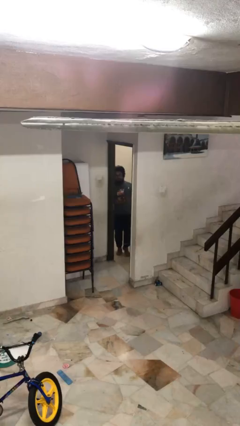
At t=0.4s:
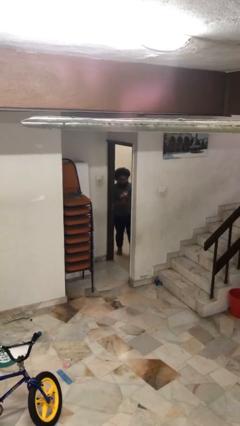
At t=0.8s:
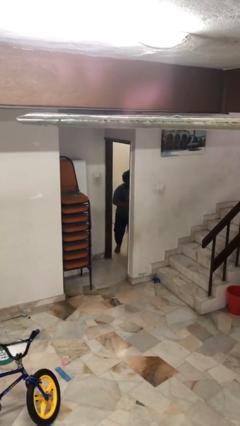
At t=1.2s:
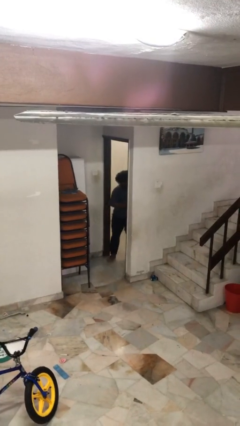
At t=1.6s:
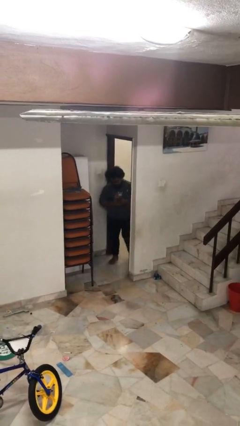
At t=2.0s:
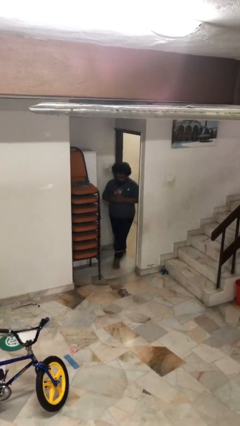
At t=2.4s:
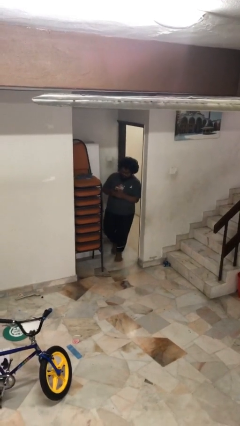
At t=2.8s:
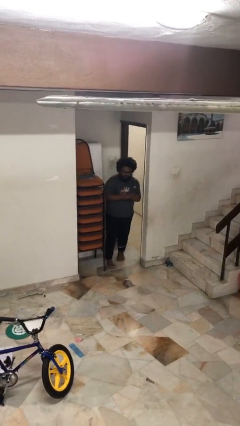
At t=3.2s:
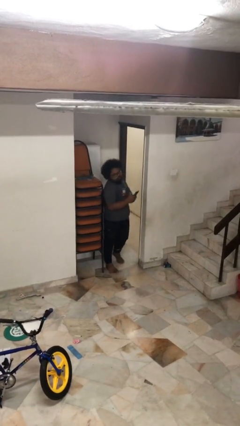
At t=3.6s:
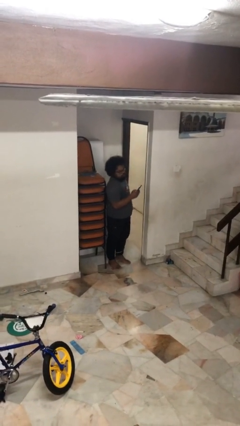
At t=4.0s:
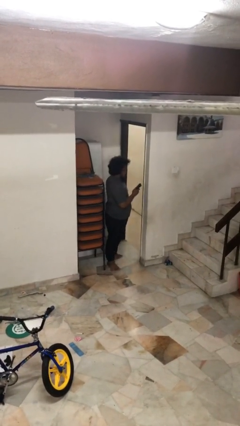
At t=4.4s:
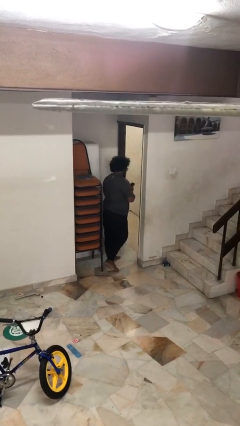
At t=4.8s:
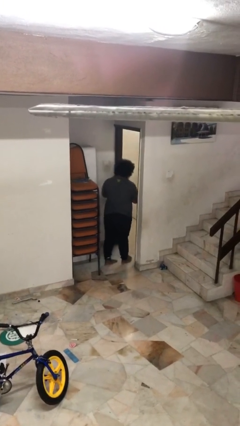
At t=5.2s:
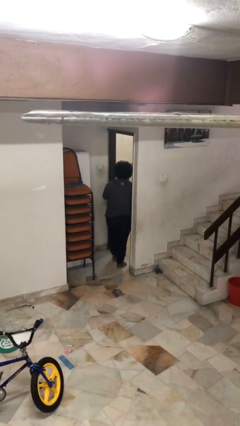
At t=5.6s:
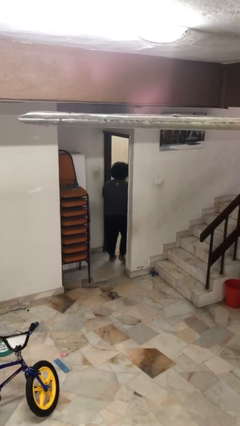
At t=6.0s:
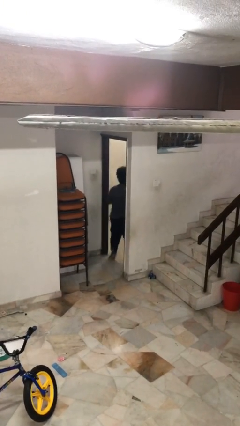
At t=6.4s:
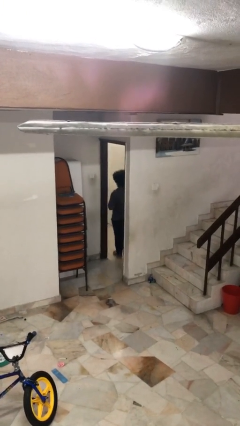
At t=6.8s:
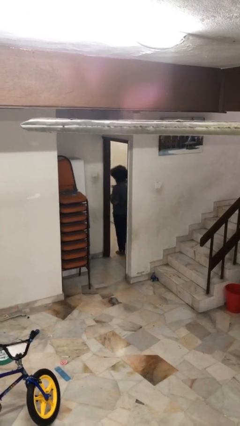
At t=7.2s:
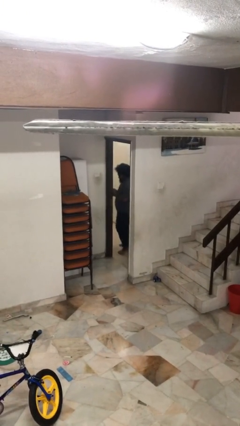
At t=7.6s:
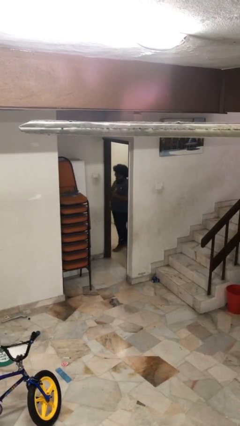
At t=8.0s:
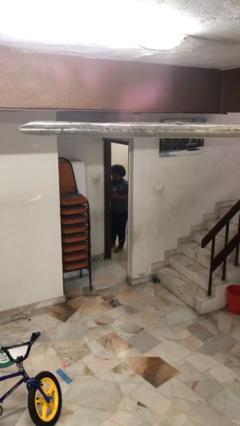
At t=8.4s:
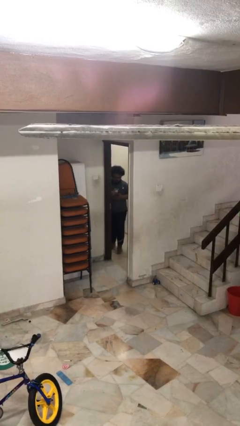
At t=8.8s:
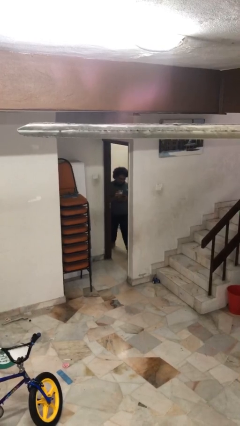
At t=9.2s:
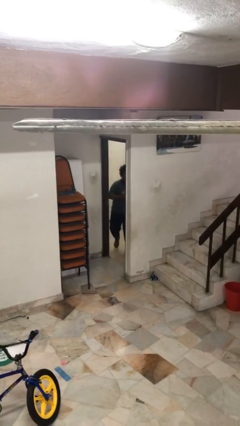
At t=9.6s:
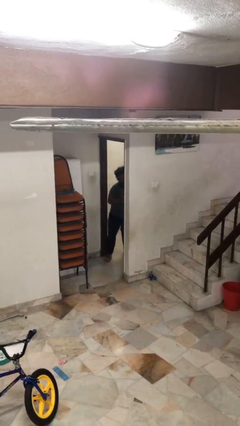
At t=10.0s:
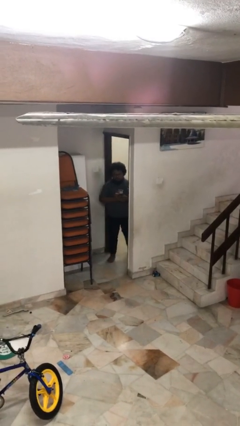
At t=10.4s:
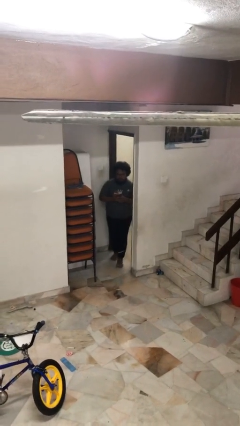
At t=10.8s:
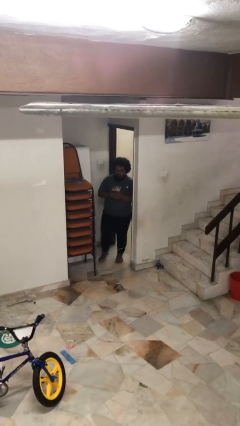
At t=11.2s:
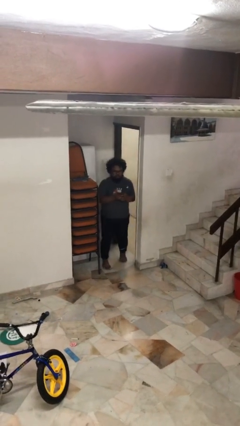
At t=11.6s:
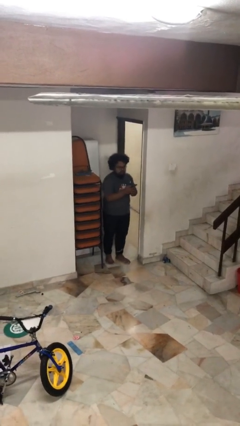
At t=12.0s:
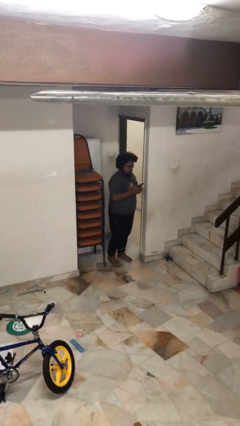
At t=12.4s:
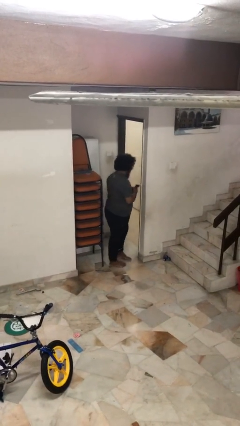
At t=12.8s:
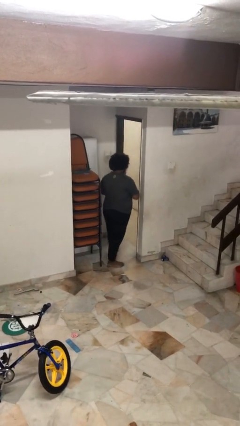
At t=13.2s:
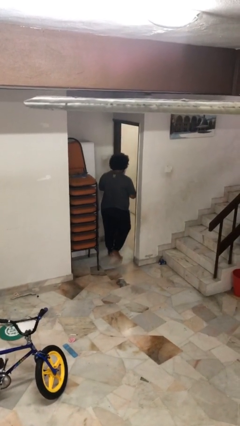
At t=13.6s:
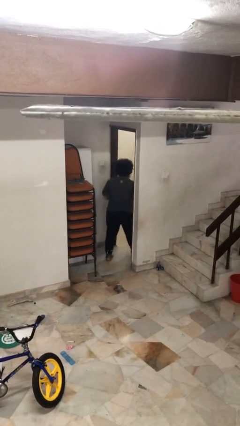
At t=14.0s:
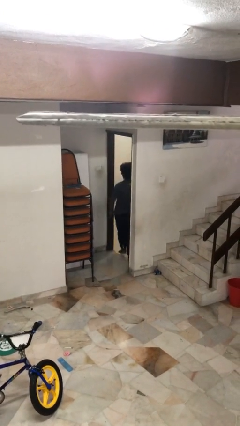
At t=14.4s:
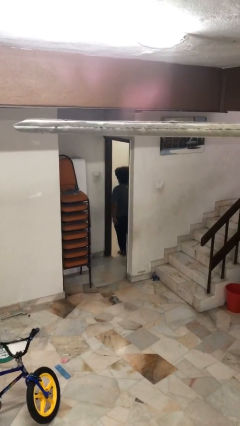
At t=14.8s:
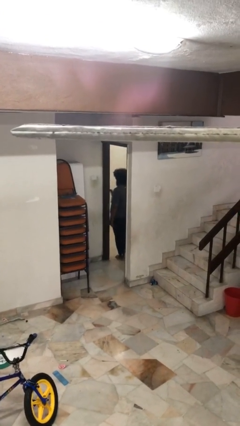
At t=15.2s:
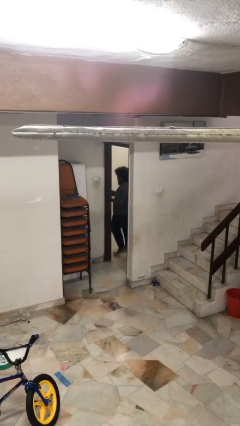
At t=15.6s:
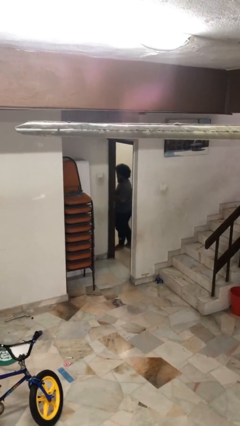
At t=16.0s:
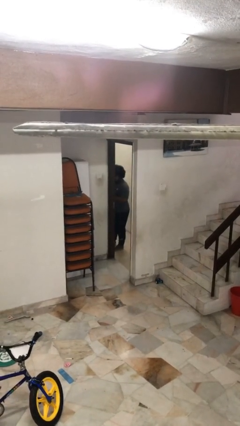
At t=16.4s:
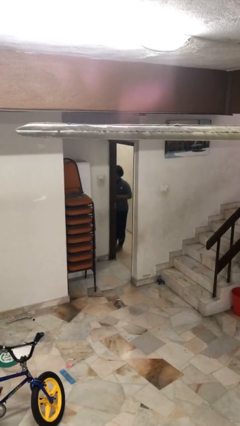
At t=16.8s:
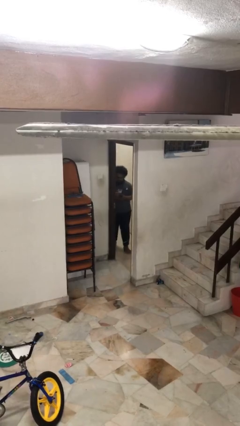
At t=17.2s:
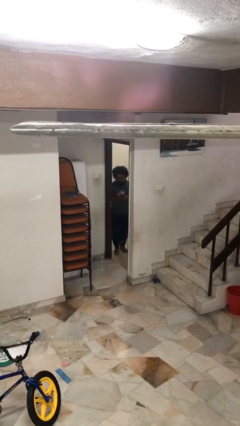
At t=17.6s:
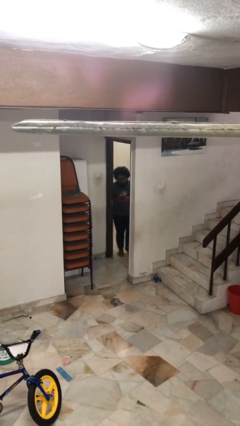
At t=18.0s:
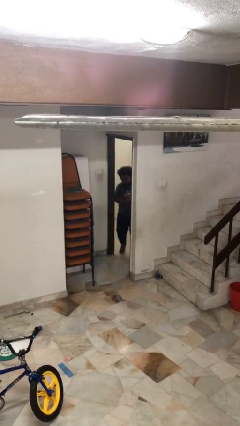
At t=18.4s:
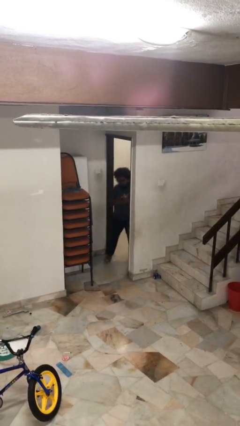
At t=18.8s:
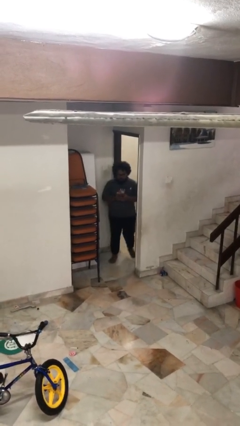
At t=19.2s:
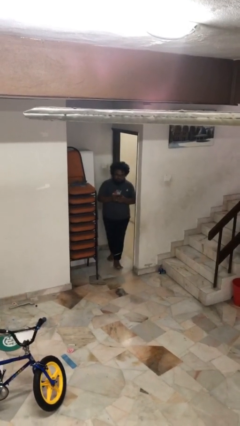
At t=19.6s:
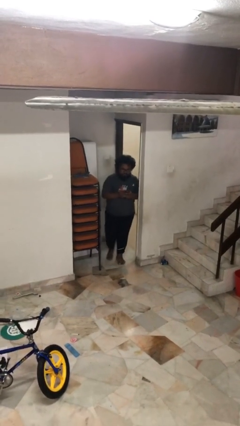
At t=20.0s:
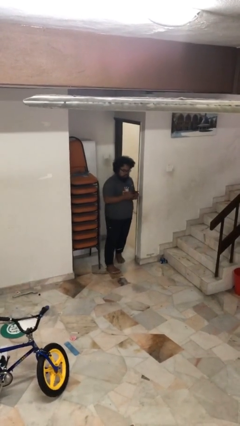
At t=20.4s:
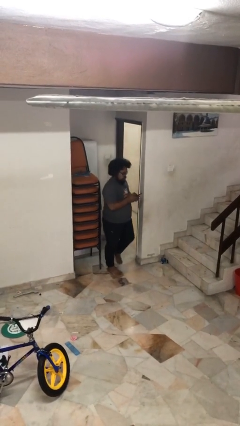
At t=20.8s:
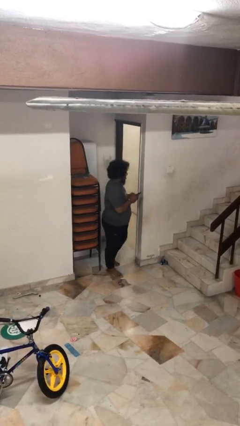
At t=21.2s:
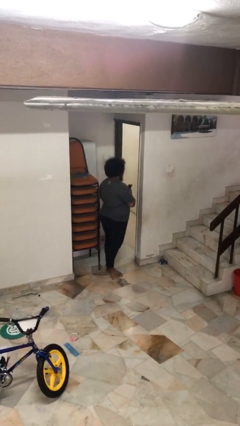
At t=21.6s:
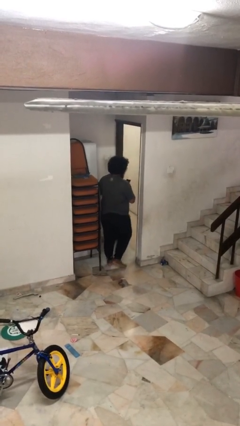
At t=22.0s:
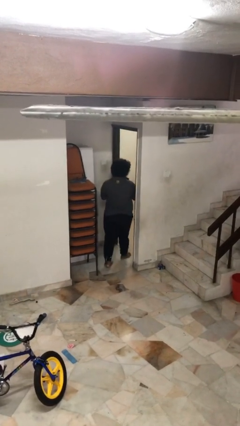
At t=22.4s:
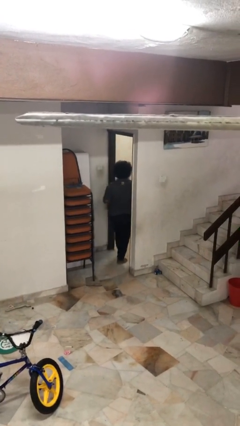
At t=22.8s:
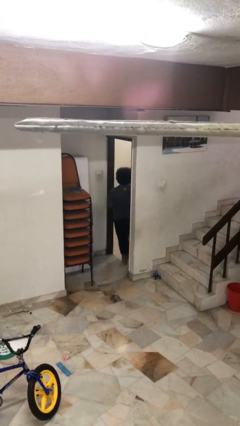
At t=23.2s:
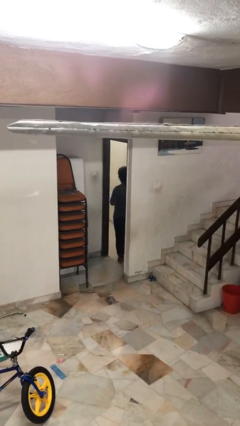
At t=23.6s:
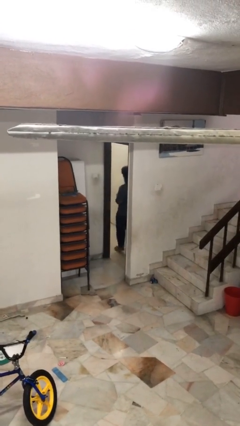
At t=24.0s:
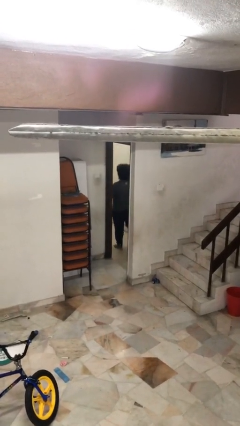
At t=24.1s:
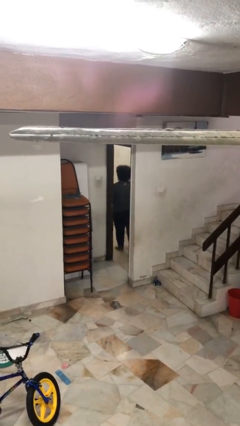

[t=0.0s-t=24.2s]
person texts on phone

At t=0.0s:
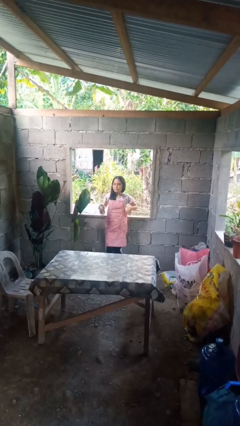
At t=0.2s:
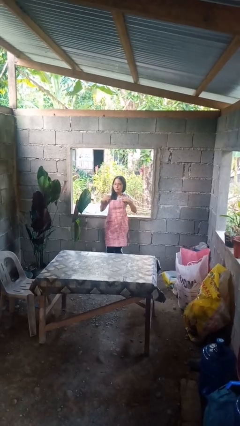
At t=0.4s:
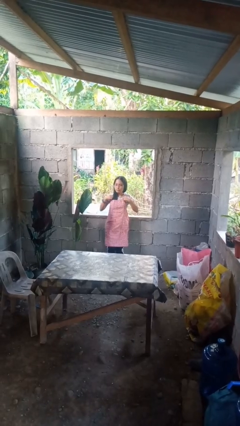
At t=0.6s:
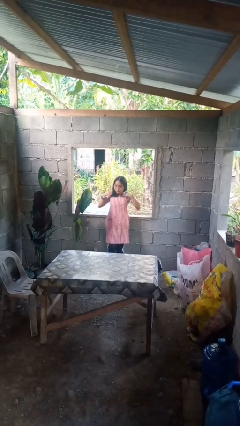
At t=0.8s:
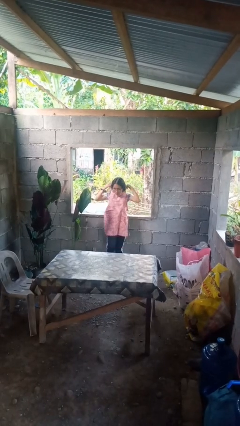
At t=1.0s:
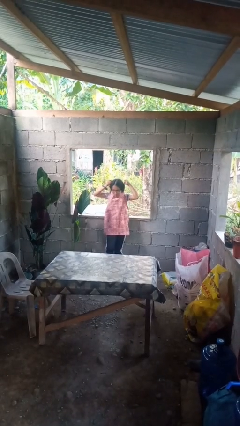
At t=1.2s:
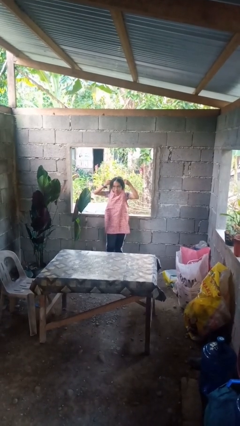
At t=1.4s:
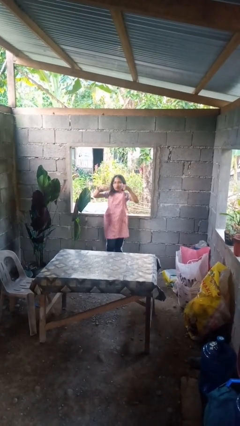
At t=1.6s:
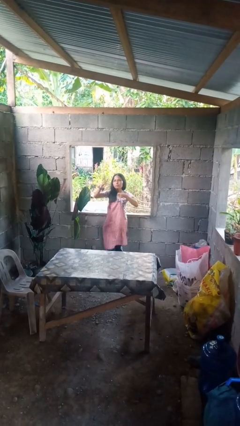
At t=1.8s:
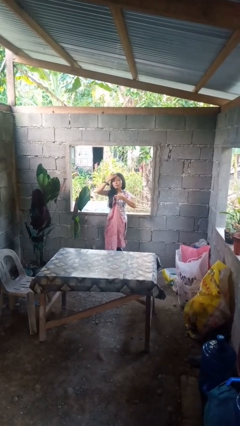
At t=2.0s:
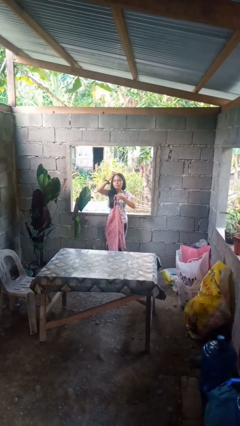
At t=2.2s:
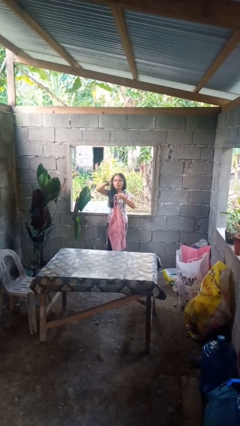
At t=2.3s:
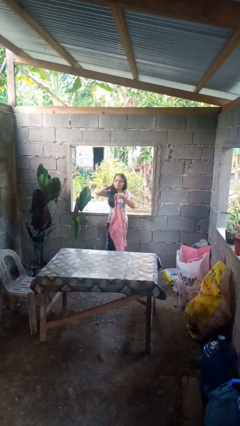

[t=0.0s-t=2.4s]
person takes off apron

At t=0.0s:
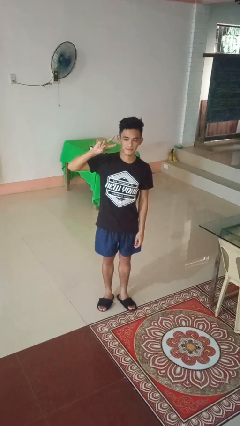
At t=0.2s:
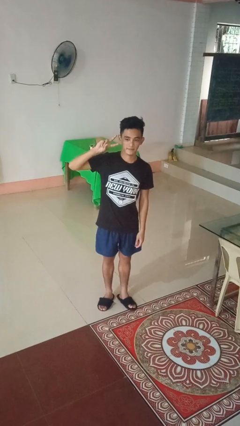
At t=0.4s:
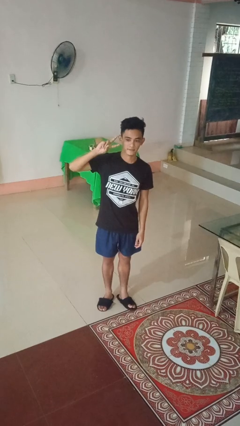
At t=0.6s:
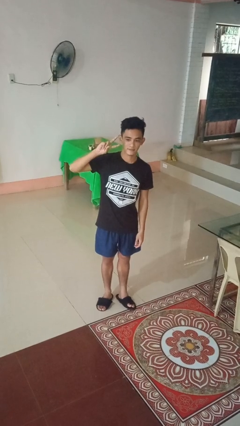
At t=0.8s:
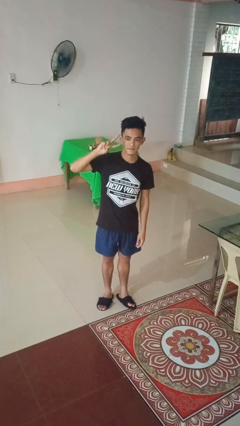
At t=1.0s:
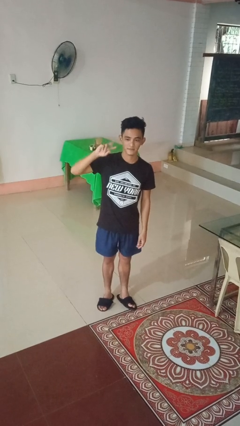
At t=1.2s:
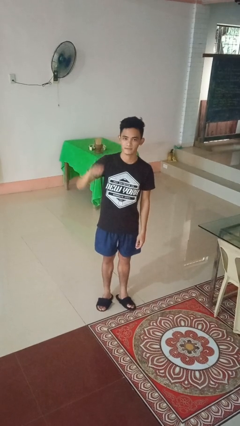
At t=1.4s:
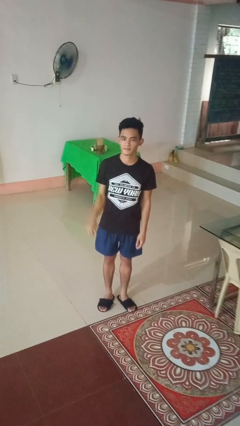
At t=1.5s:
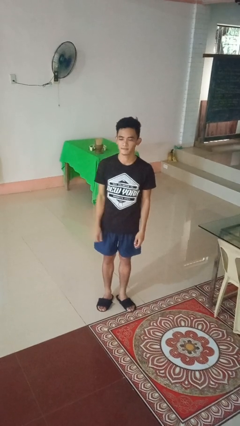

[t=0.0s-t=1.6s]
person gestures peace

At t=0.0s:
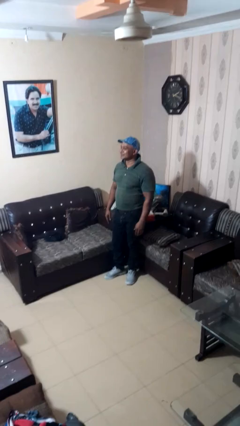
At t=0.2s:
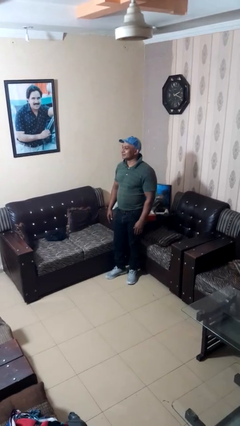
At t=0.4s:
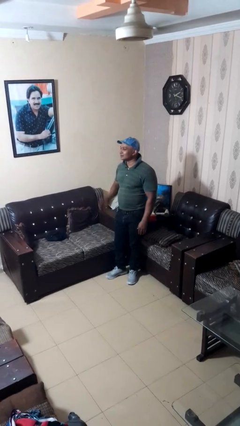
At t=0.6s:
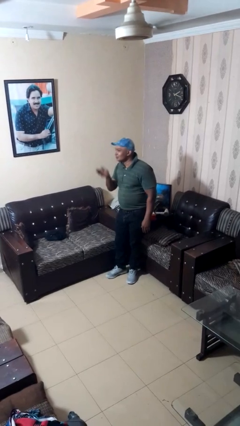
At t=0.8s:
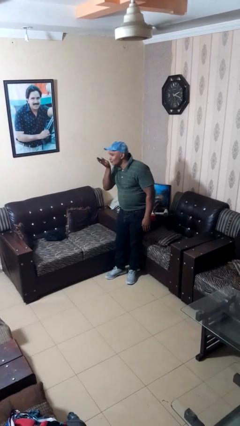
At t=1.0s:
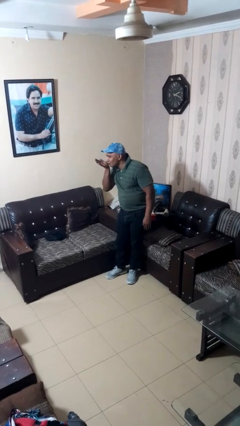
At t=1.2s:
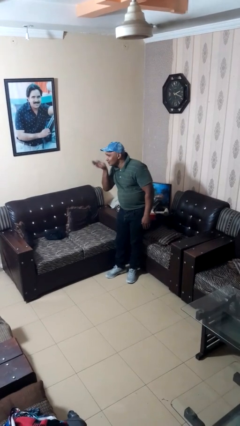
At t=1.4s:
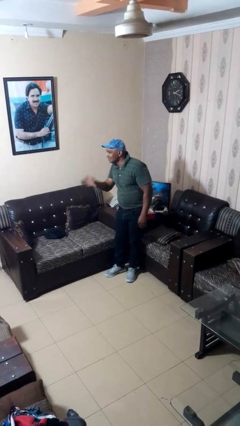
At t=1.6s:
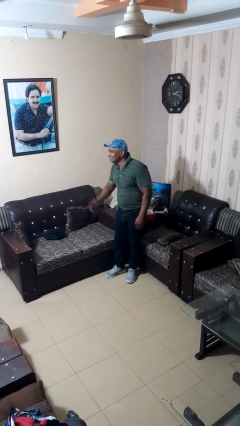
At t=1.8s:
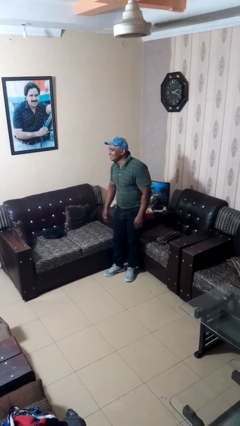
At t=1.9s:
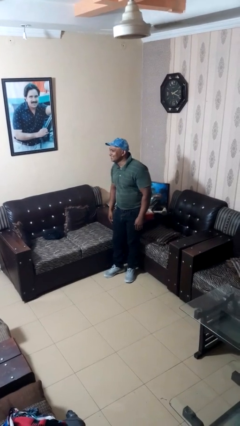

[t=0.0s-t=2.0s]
person gestures blow kiss
